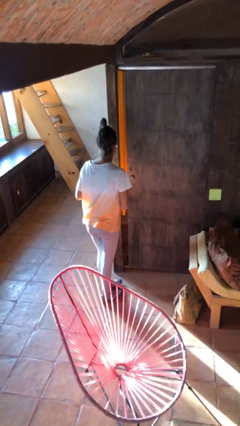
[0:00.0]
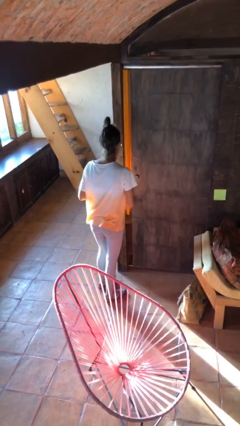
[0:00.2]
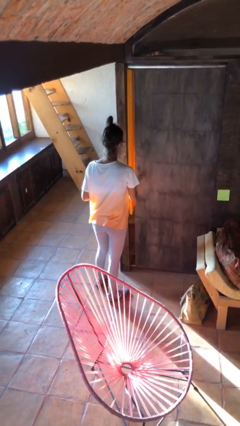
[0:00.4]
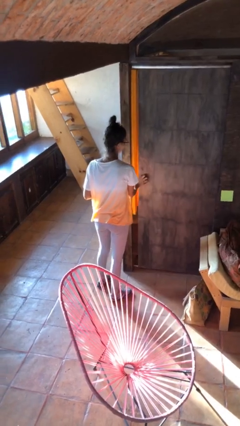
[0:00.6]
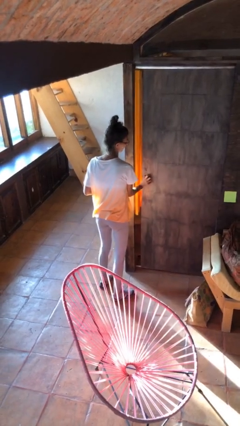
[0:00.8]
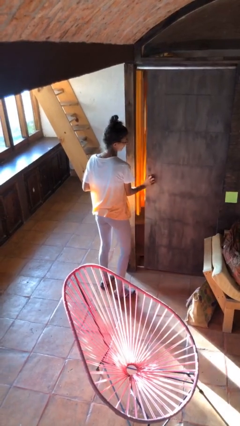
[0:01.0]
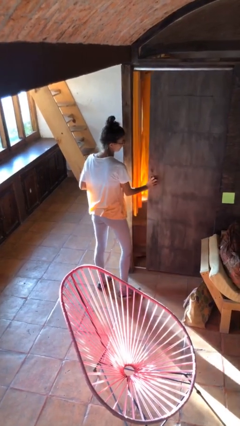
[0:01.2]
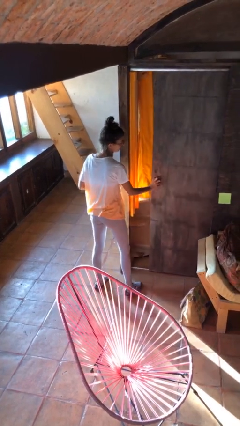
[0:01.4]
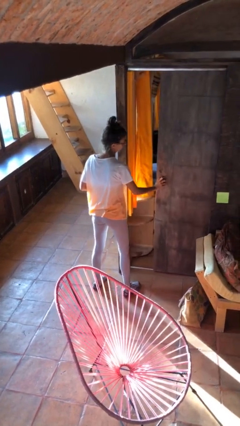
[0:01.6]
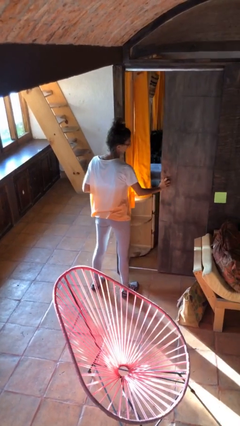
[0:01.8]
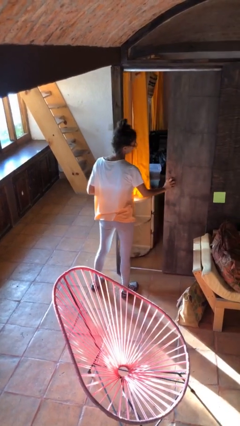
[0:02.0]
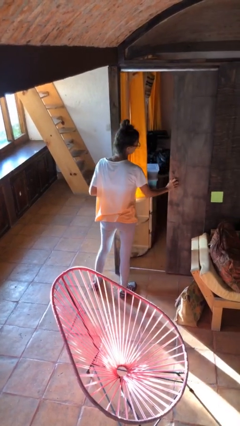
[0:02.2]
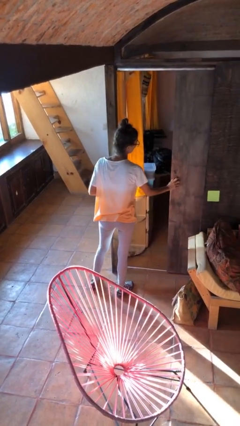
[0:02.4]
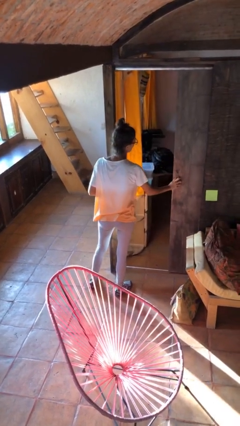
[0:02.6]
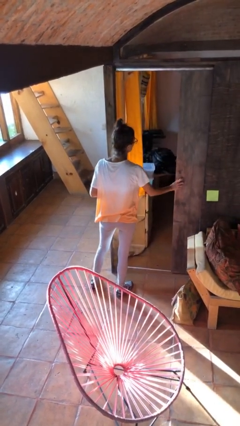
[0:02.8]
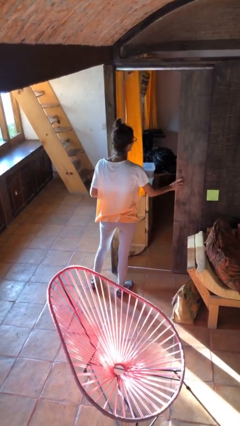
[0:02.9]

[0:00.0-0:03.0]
person opens sliding door

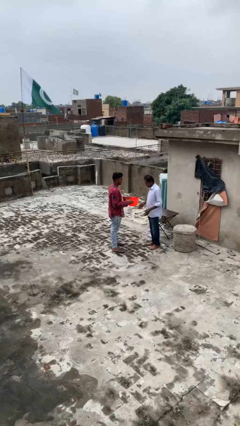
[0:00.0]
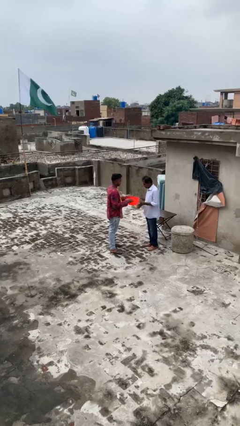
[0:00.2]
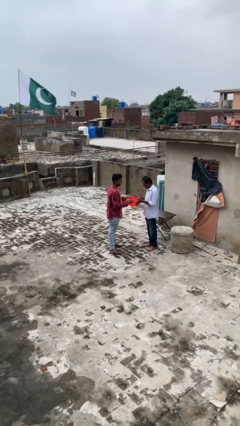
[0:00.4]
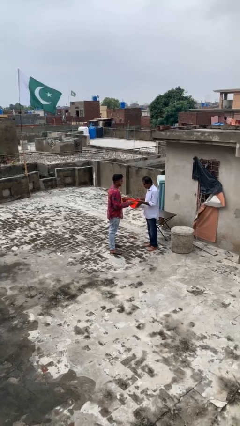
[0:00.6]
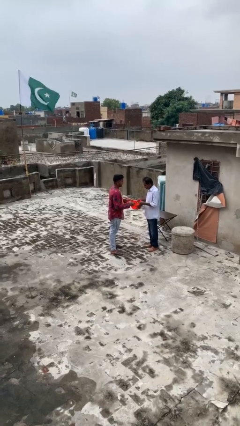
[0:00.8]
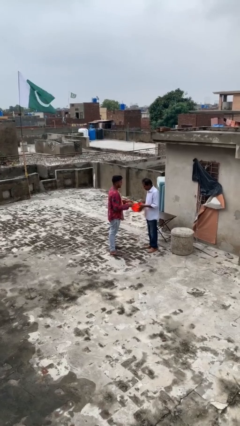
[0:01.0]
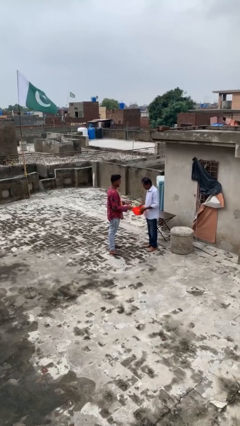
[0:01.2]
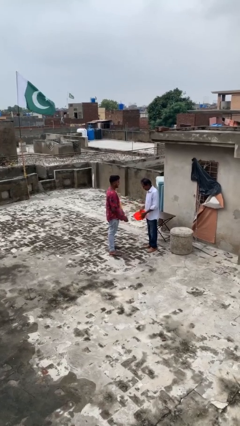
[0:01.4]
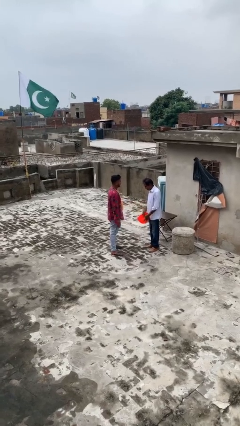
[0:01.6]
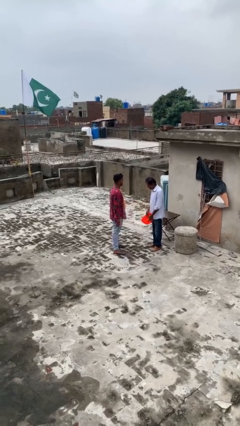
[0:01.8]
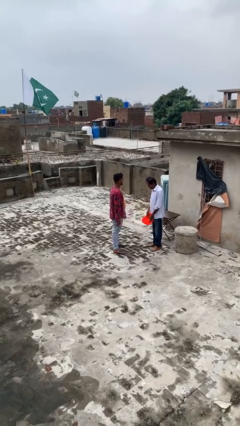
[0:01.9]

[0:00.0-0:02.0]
person transfers object to person

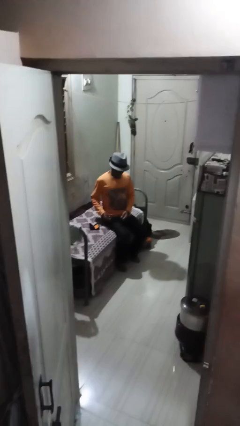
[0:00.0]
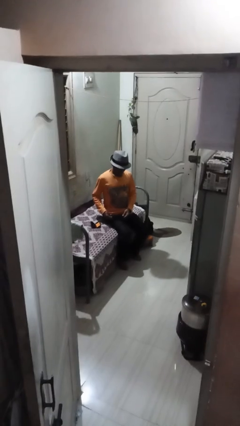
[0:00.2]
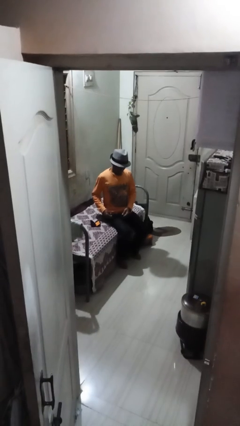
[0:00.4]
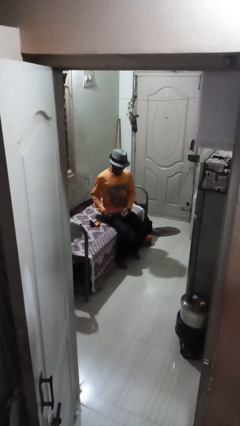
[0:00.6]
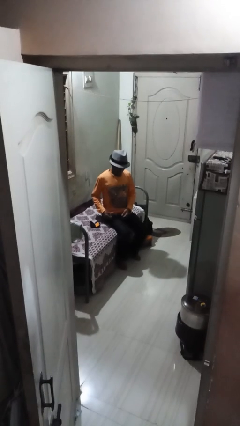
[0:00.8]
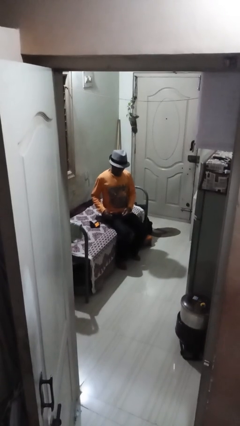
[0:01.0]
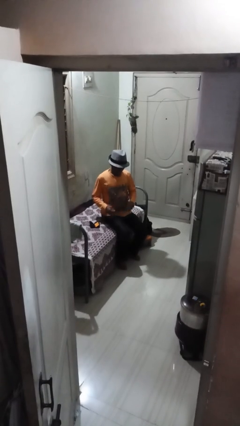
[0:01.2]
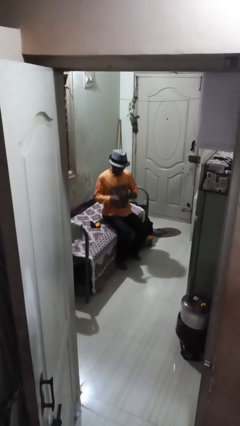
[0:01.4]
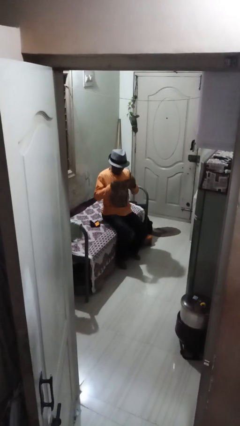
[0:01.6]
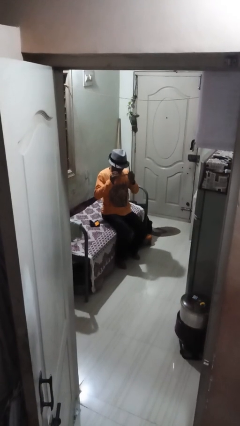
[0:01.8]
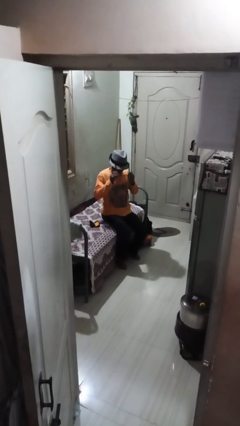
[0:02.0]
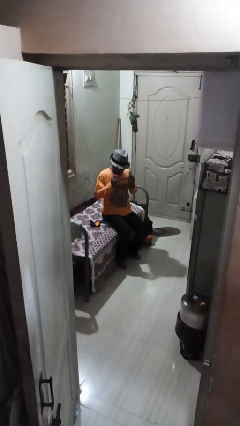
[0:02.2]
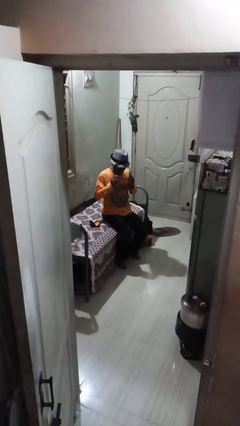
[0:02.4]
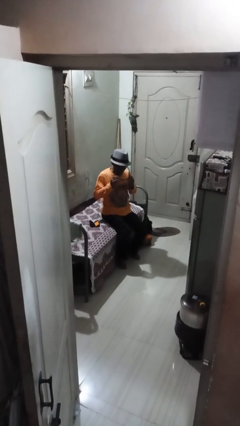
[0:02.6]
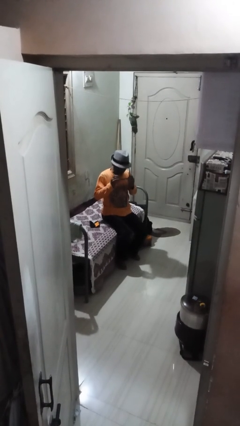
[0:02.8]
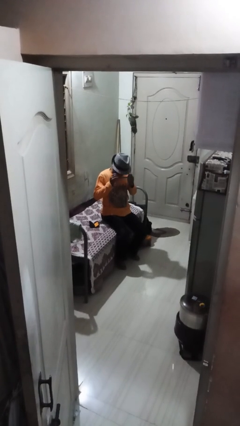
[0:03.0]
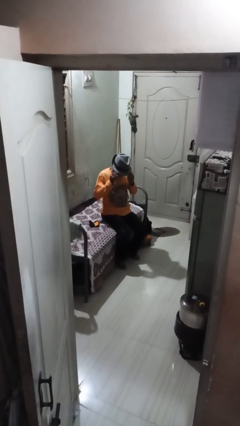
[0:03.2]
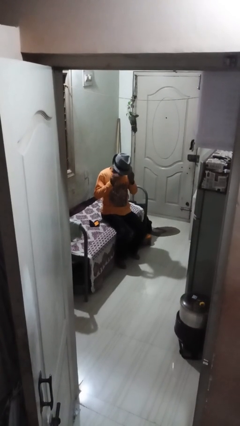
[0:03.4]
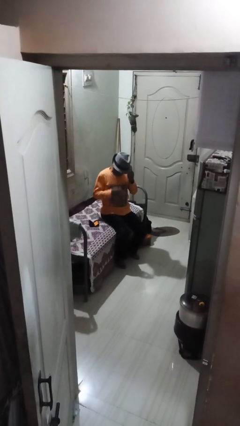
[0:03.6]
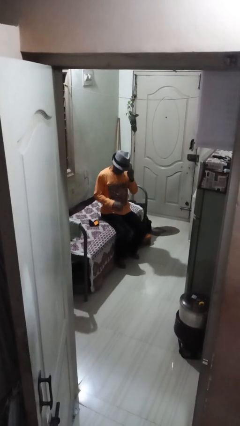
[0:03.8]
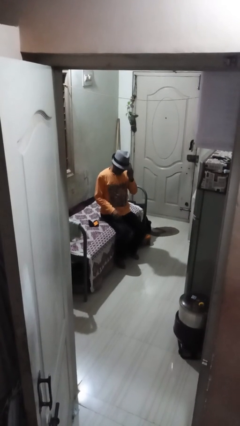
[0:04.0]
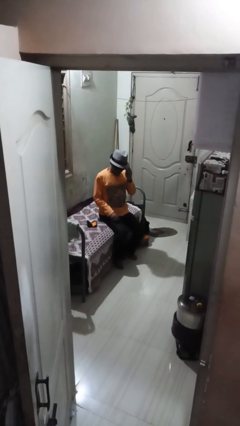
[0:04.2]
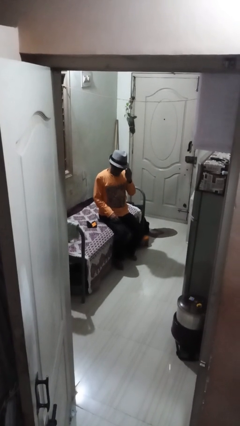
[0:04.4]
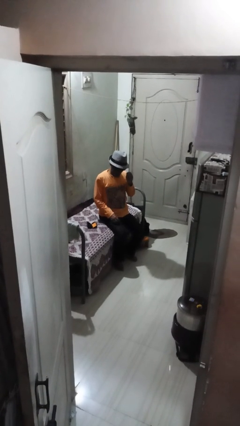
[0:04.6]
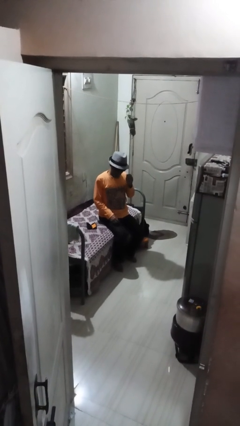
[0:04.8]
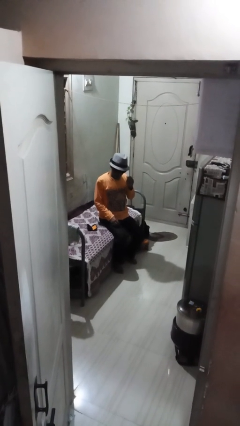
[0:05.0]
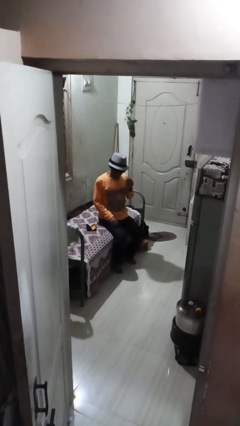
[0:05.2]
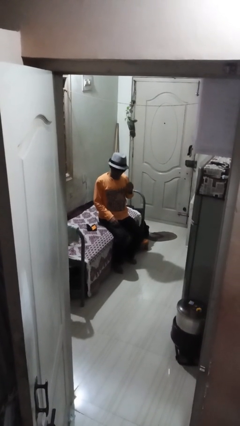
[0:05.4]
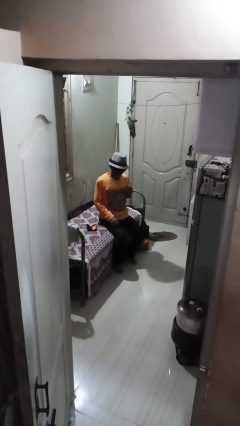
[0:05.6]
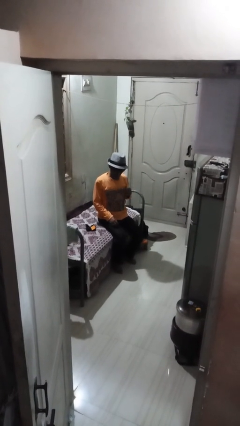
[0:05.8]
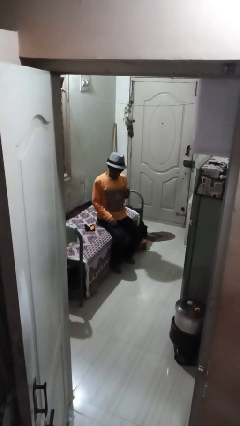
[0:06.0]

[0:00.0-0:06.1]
person puts on sunglasses

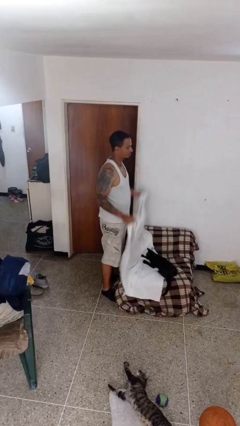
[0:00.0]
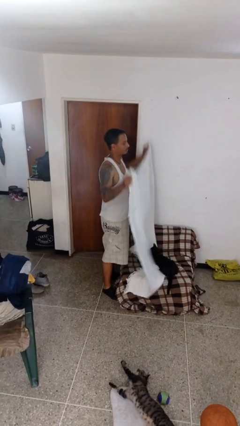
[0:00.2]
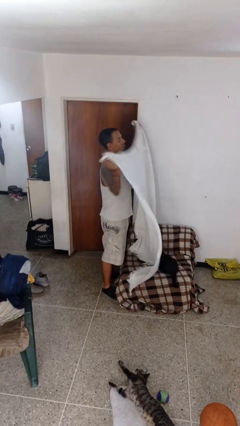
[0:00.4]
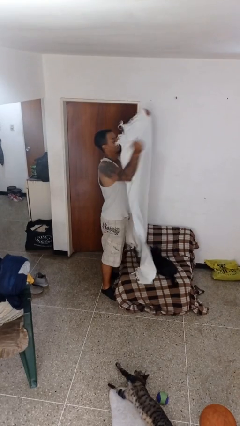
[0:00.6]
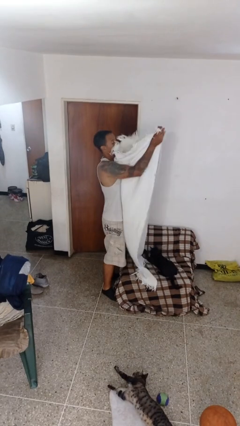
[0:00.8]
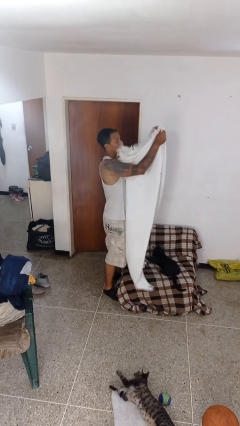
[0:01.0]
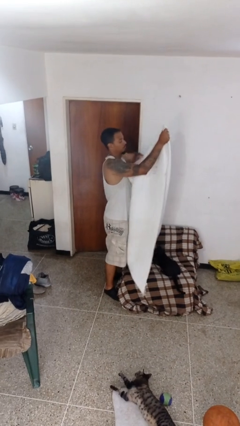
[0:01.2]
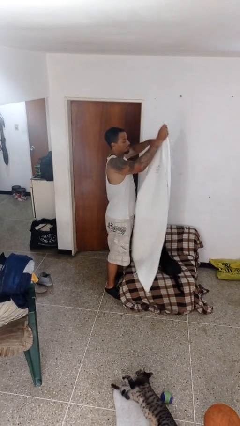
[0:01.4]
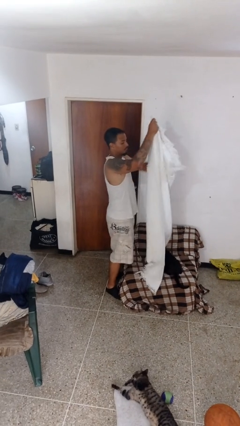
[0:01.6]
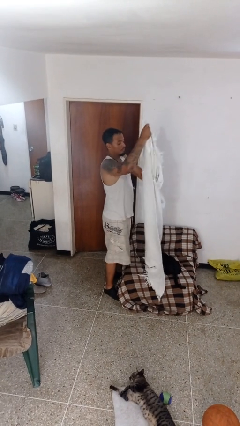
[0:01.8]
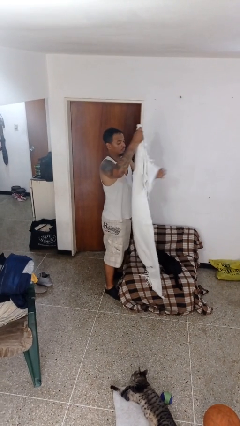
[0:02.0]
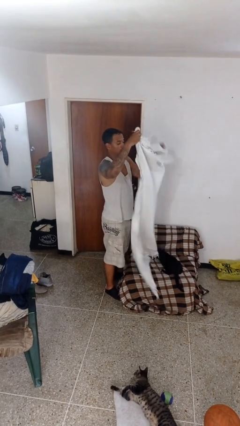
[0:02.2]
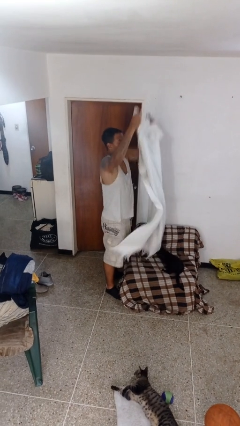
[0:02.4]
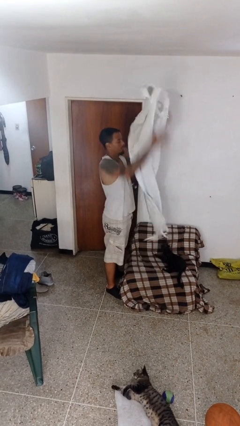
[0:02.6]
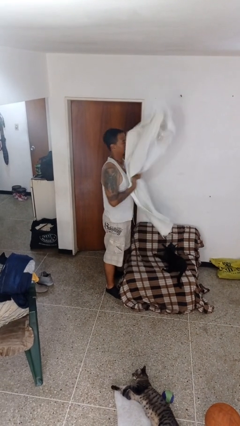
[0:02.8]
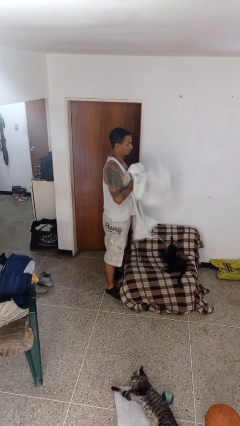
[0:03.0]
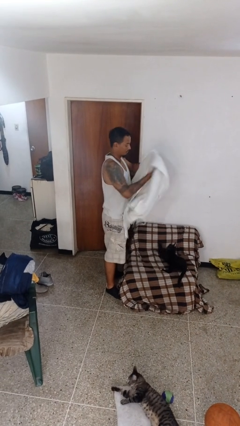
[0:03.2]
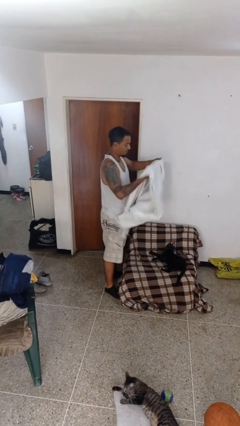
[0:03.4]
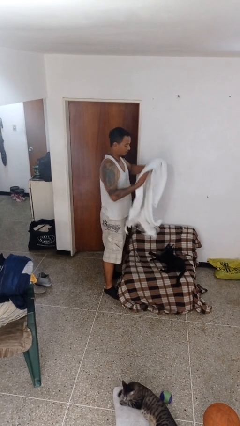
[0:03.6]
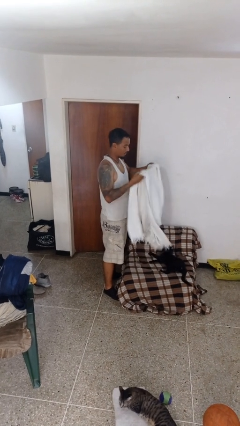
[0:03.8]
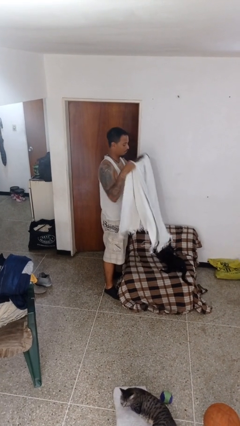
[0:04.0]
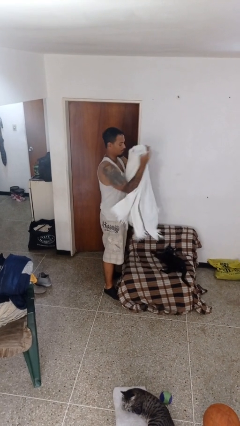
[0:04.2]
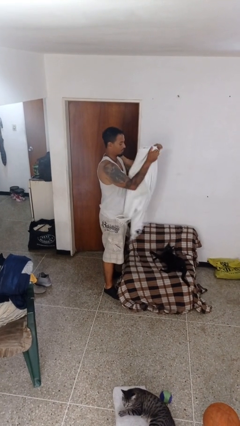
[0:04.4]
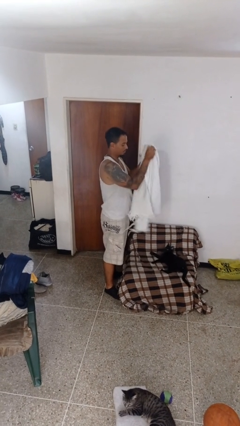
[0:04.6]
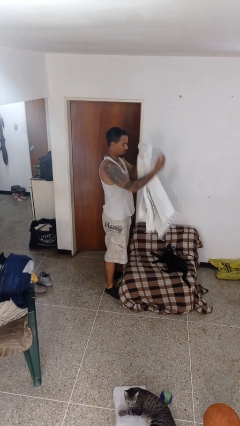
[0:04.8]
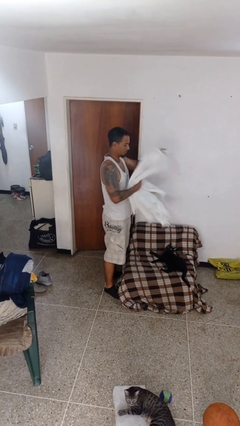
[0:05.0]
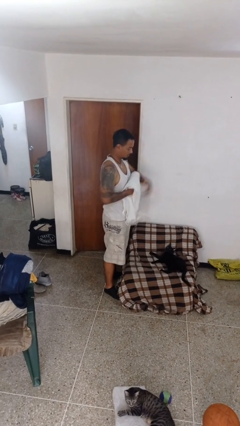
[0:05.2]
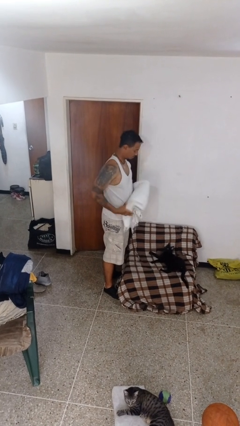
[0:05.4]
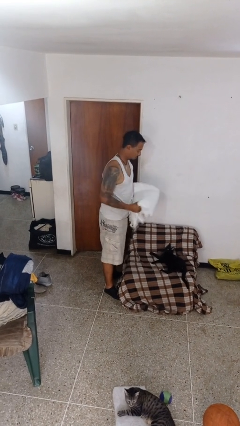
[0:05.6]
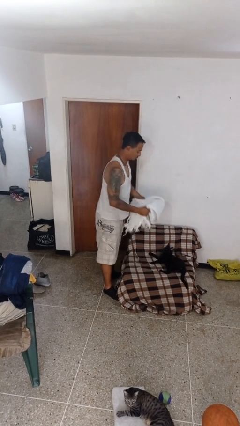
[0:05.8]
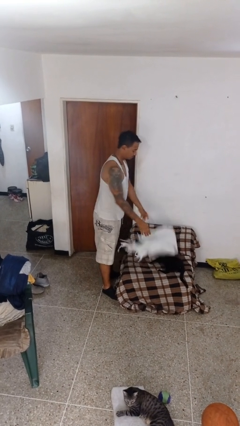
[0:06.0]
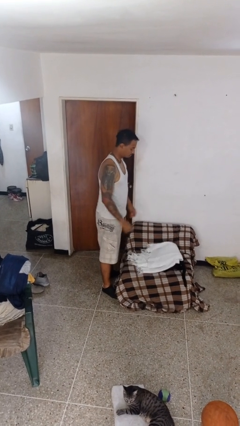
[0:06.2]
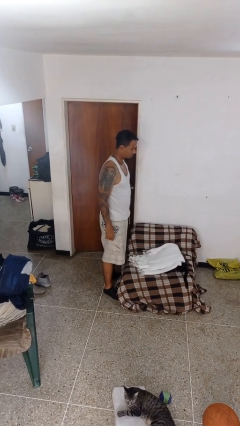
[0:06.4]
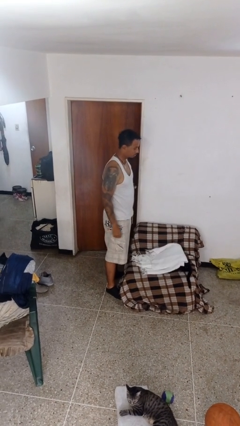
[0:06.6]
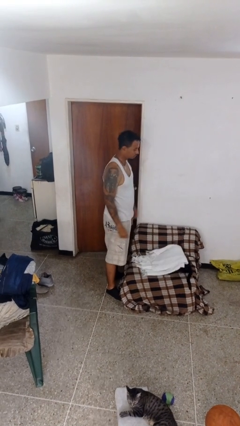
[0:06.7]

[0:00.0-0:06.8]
person folds blanket
